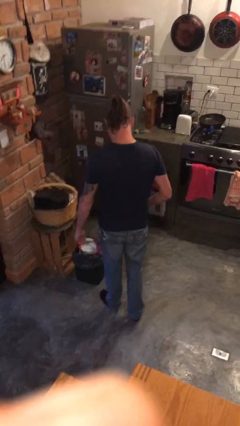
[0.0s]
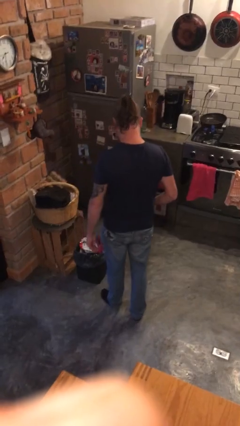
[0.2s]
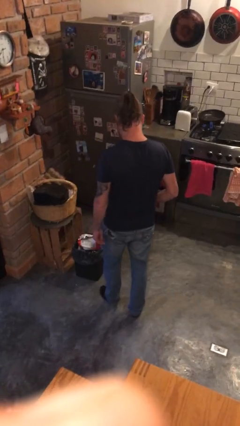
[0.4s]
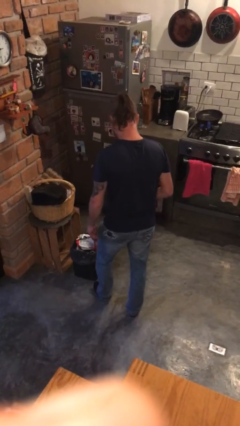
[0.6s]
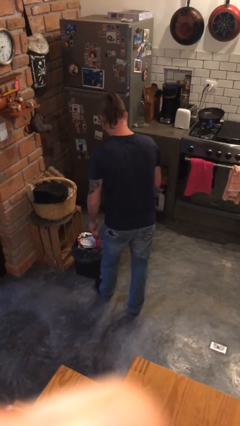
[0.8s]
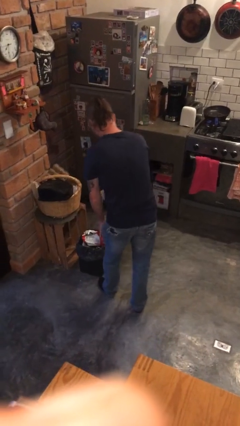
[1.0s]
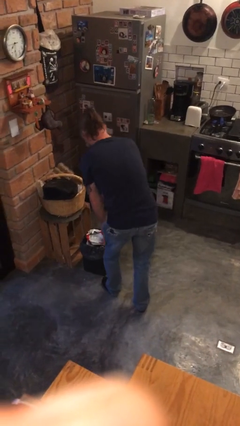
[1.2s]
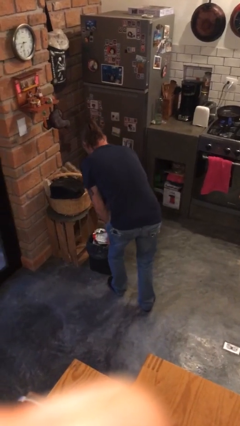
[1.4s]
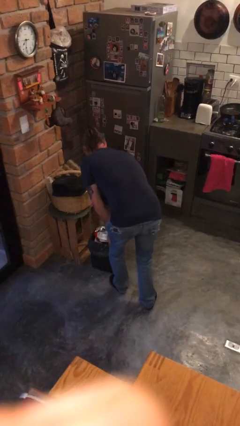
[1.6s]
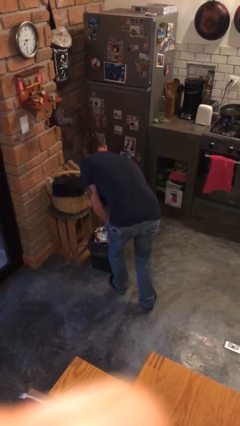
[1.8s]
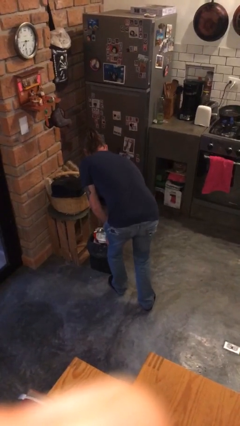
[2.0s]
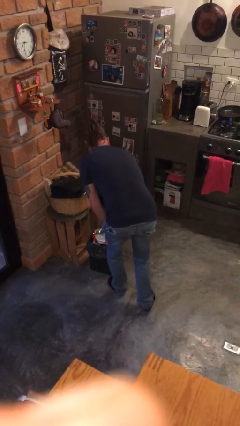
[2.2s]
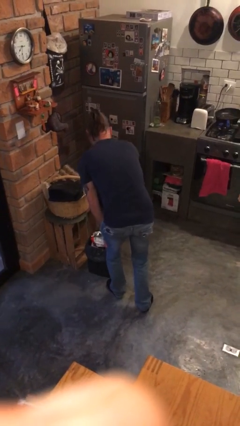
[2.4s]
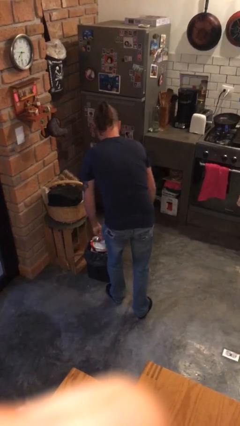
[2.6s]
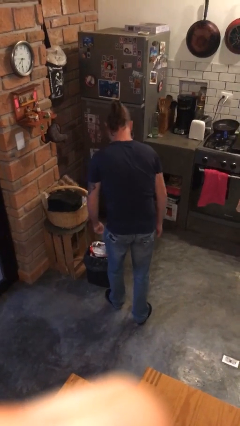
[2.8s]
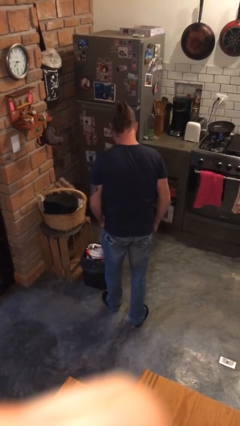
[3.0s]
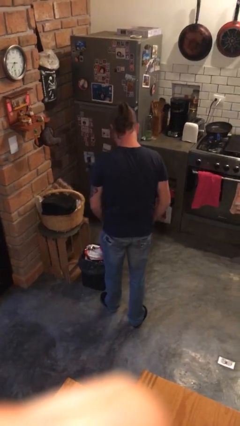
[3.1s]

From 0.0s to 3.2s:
person discards trash

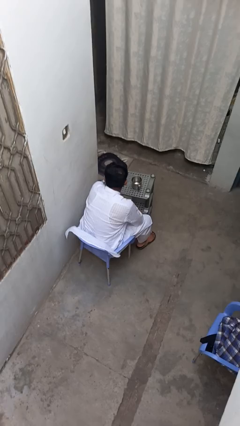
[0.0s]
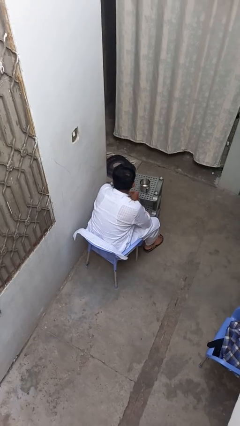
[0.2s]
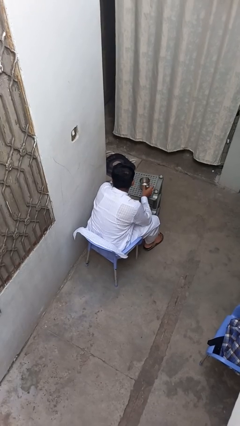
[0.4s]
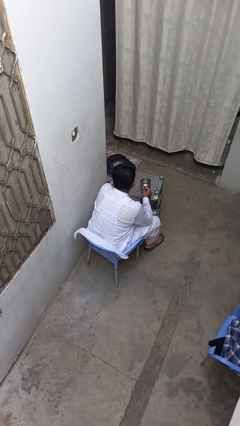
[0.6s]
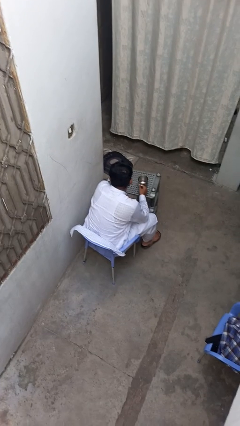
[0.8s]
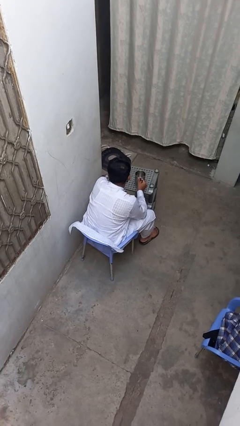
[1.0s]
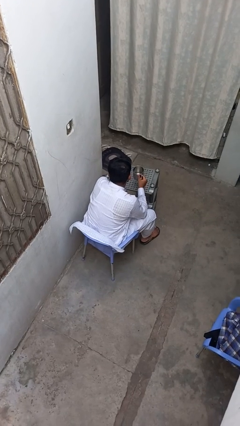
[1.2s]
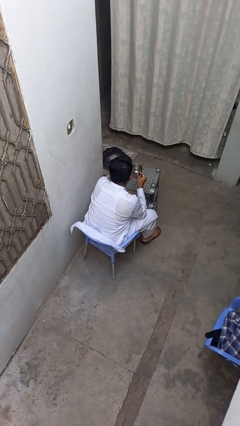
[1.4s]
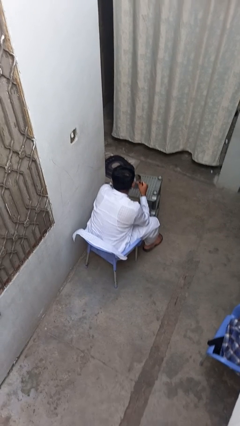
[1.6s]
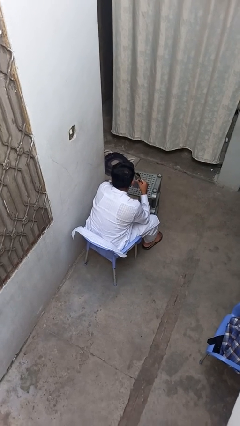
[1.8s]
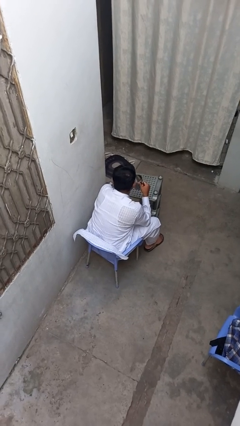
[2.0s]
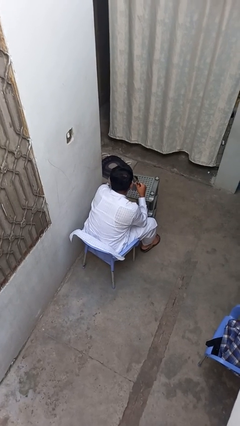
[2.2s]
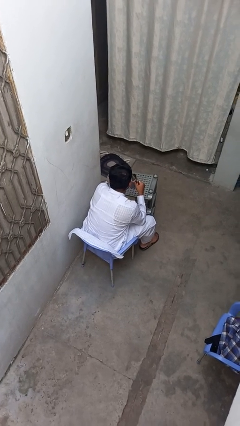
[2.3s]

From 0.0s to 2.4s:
person picks up object from table

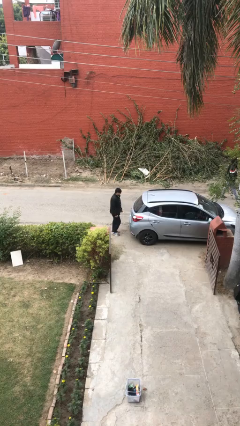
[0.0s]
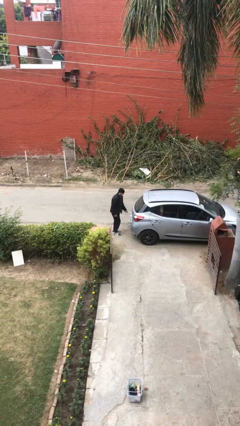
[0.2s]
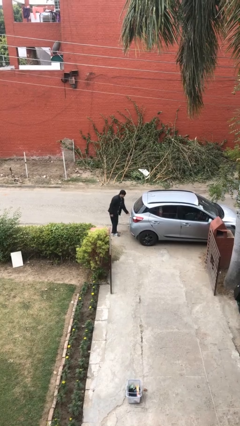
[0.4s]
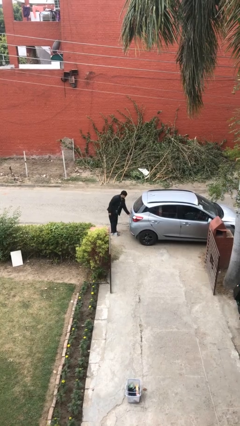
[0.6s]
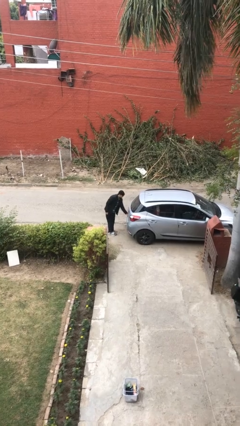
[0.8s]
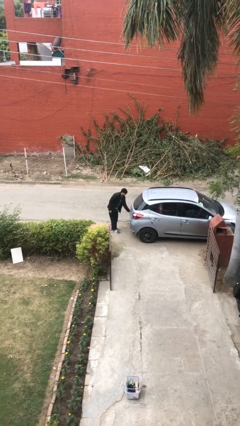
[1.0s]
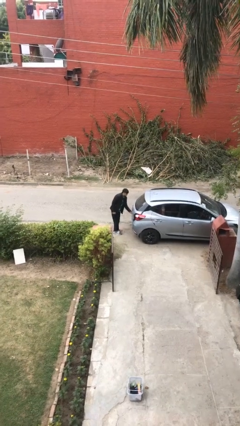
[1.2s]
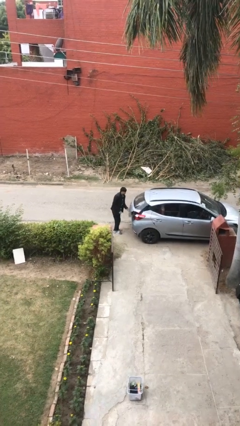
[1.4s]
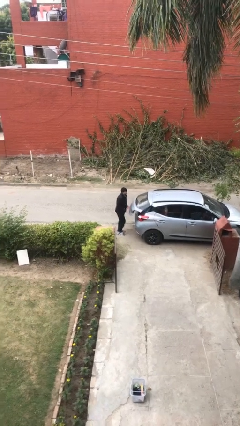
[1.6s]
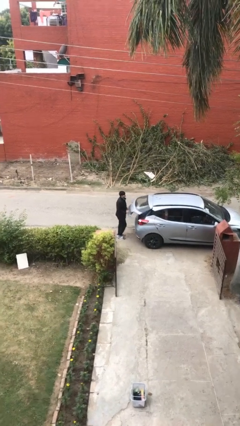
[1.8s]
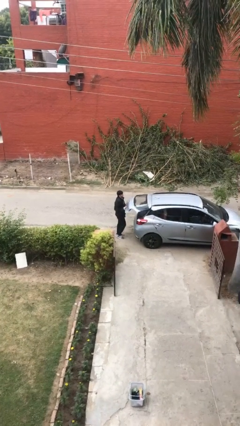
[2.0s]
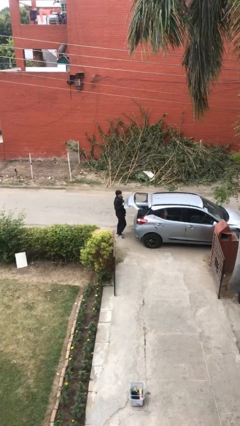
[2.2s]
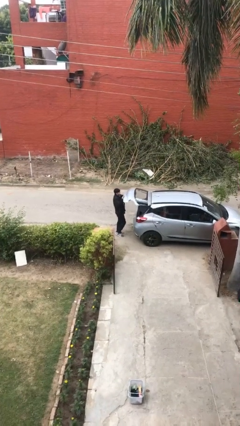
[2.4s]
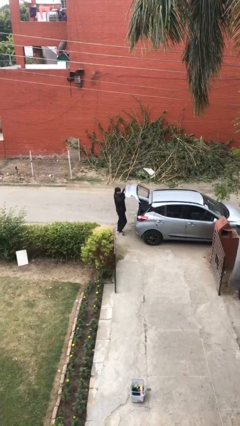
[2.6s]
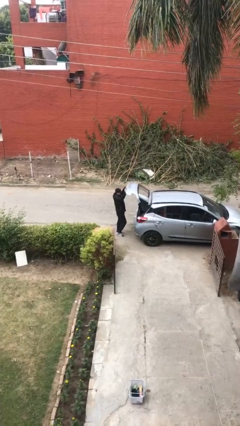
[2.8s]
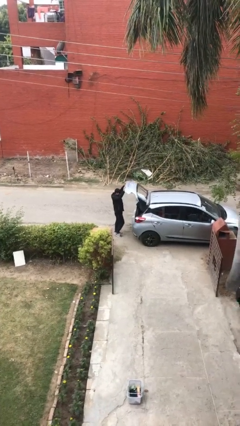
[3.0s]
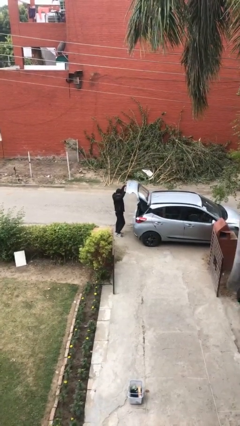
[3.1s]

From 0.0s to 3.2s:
person opens car trunk

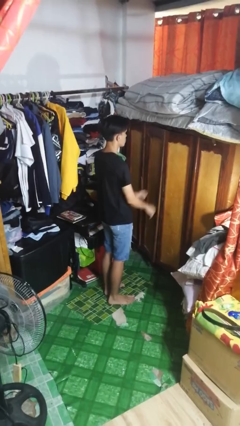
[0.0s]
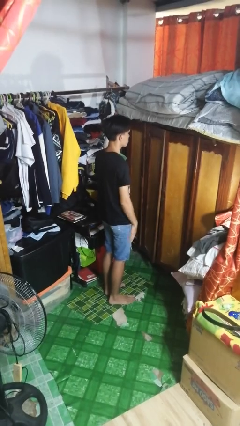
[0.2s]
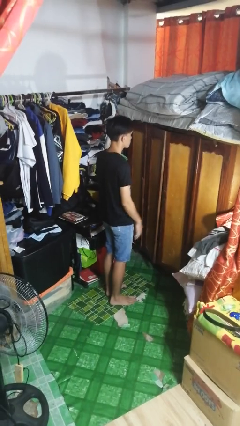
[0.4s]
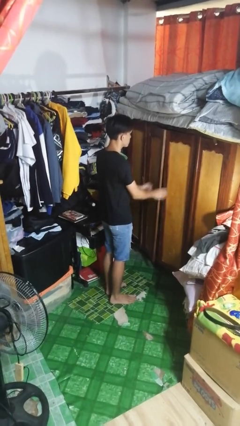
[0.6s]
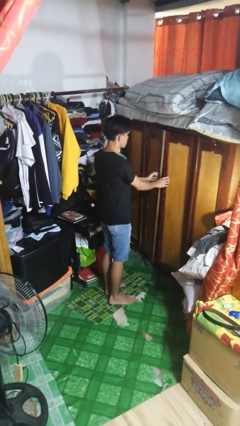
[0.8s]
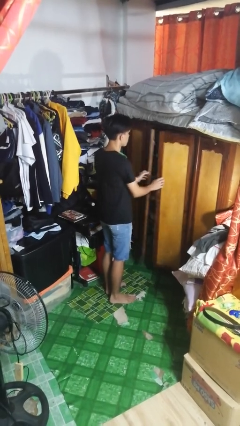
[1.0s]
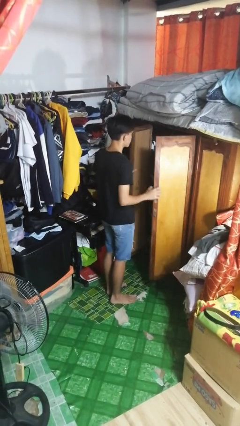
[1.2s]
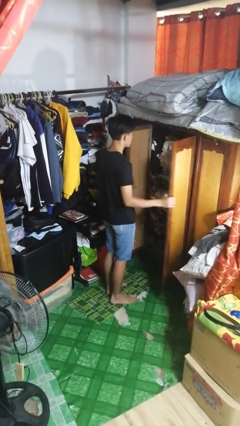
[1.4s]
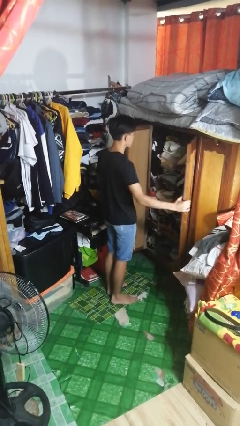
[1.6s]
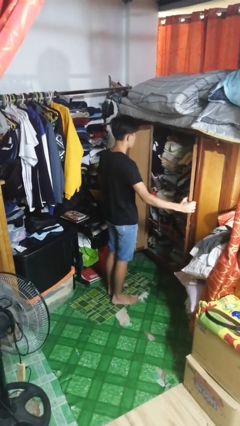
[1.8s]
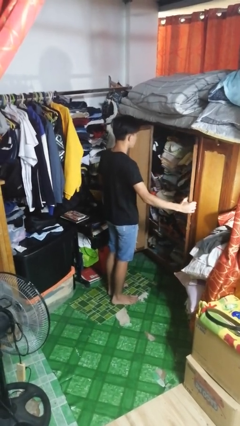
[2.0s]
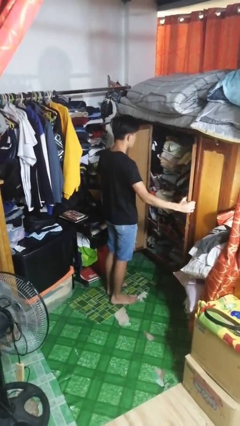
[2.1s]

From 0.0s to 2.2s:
person opens closet door

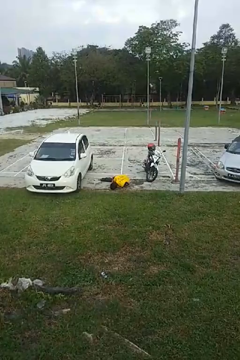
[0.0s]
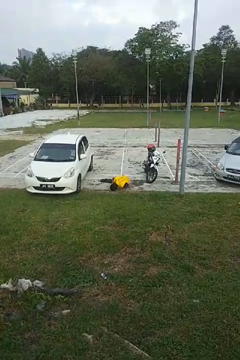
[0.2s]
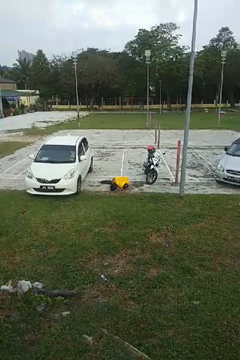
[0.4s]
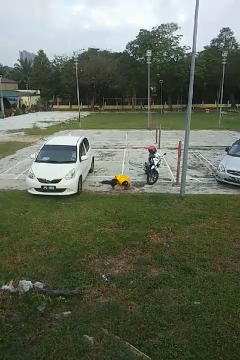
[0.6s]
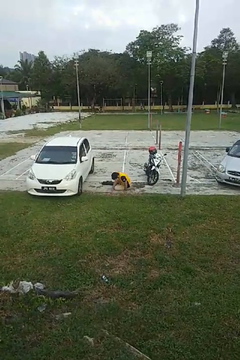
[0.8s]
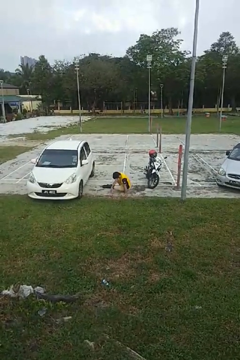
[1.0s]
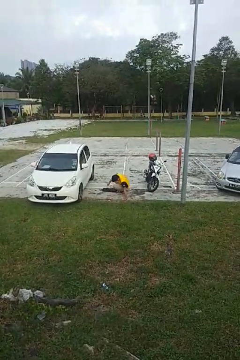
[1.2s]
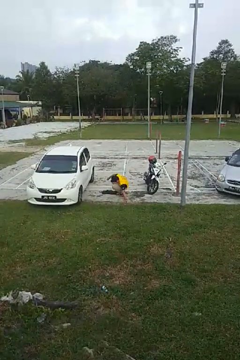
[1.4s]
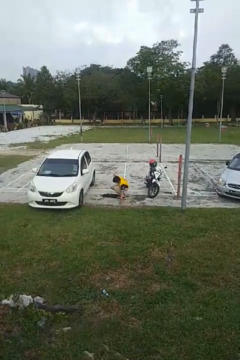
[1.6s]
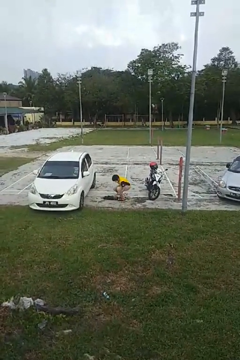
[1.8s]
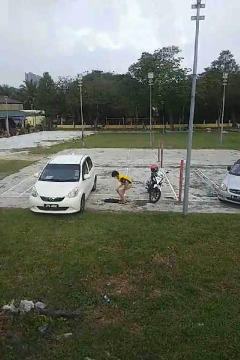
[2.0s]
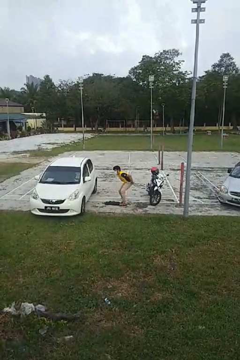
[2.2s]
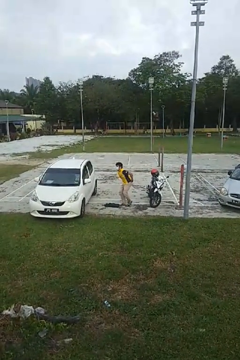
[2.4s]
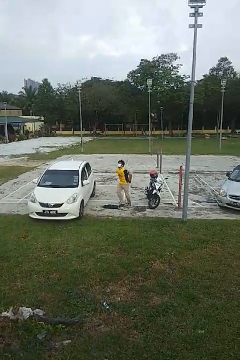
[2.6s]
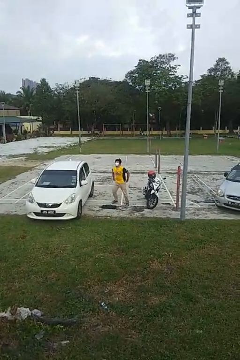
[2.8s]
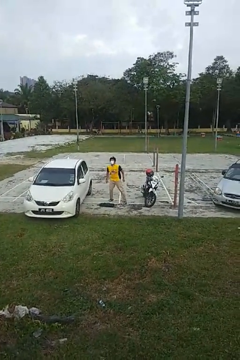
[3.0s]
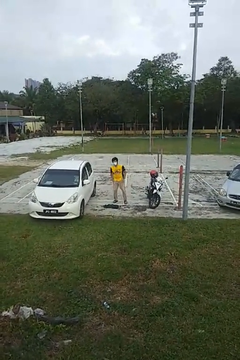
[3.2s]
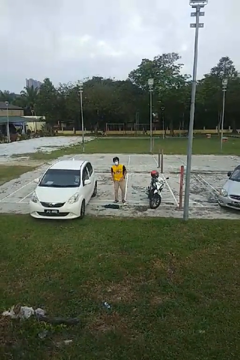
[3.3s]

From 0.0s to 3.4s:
person stands up from floor

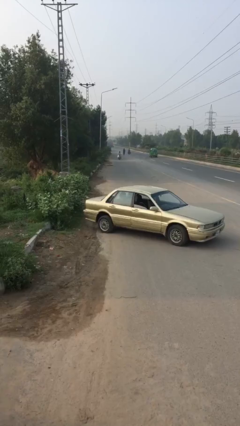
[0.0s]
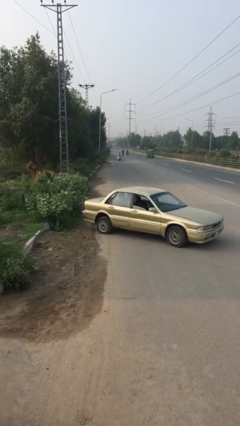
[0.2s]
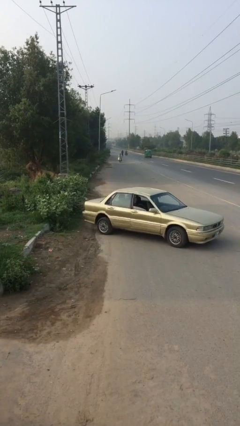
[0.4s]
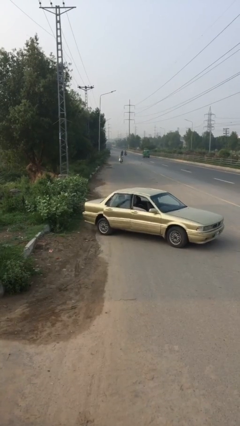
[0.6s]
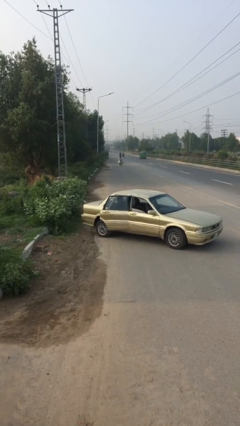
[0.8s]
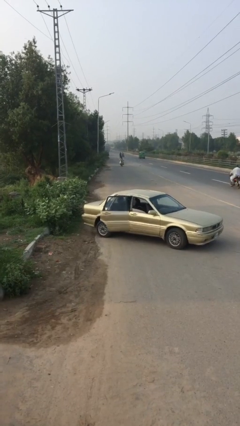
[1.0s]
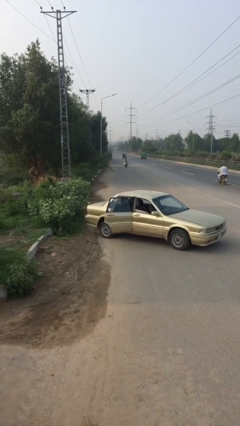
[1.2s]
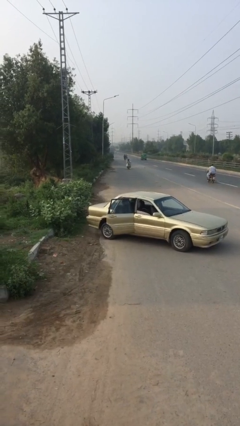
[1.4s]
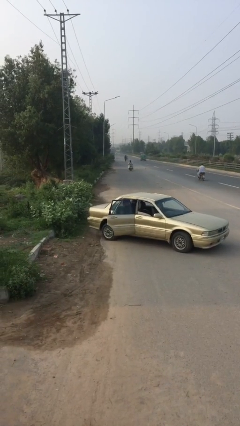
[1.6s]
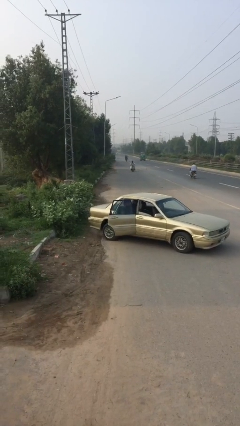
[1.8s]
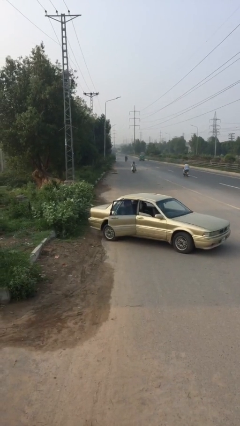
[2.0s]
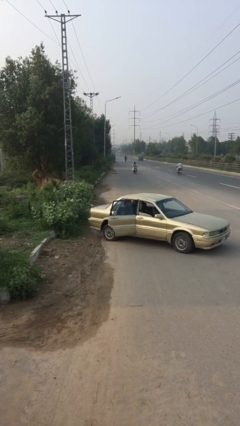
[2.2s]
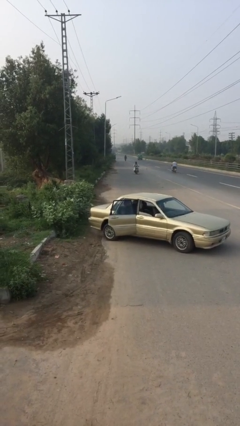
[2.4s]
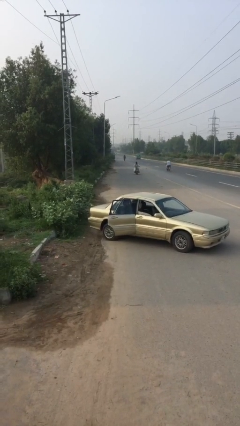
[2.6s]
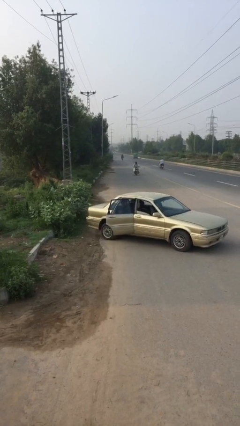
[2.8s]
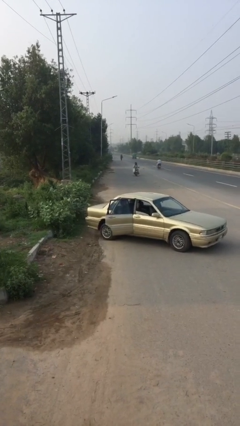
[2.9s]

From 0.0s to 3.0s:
person opens car door

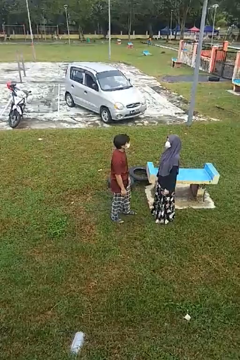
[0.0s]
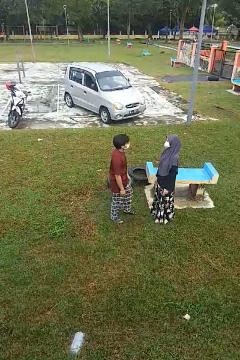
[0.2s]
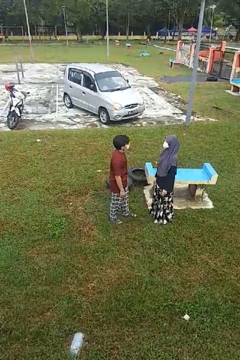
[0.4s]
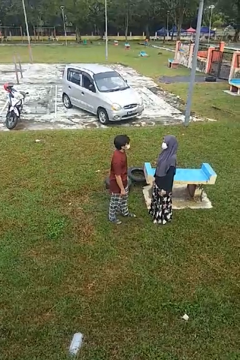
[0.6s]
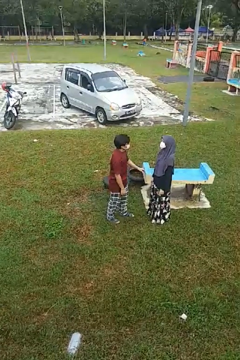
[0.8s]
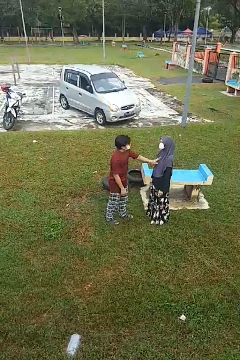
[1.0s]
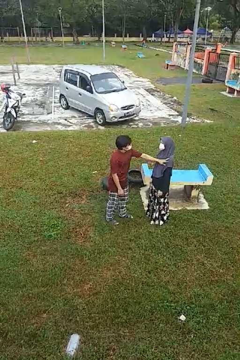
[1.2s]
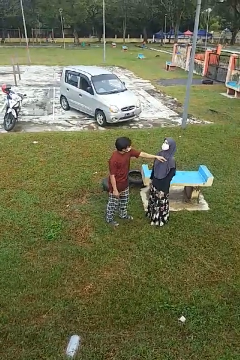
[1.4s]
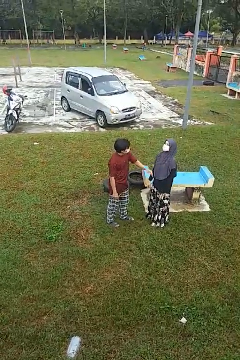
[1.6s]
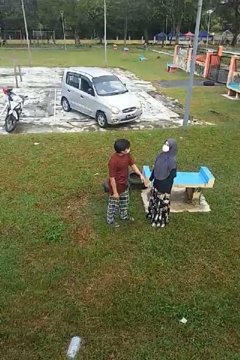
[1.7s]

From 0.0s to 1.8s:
person shoves person
